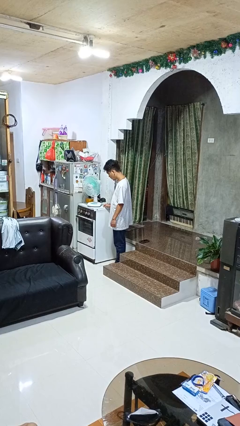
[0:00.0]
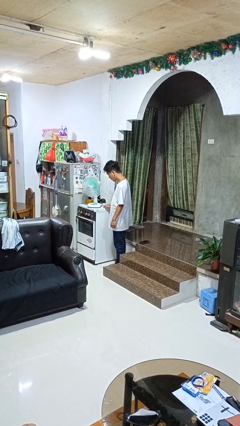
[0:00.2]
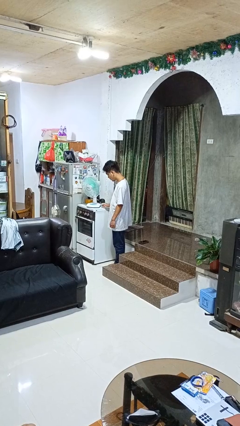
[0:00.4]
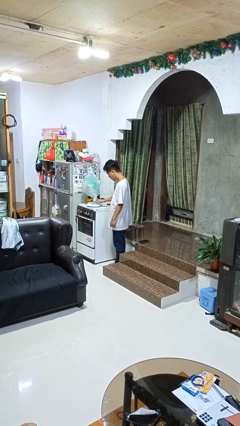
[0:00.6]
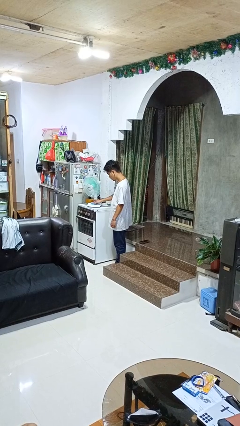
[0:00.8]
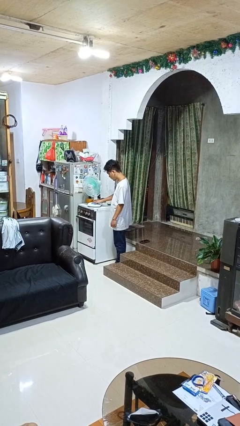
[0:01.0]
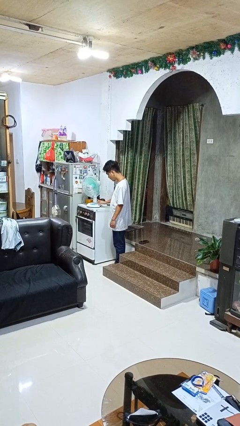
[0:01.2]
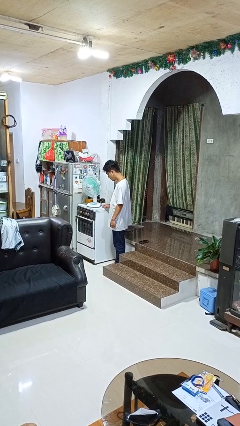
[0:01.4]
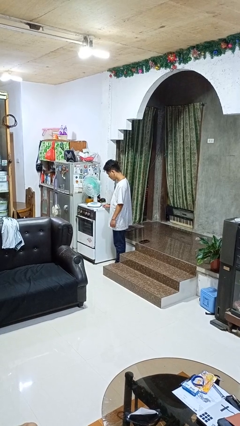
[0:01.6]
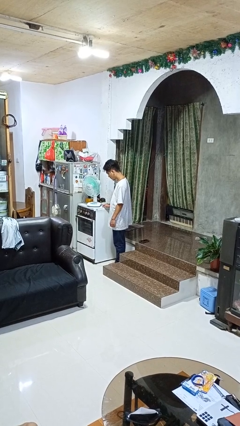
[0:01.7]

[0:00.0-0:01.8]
person turns off fan

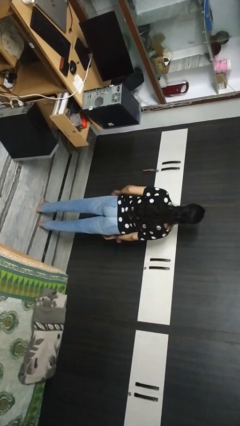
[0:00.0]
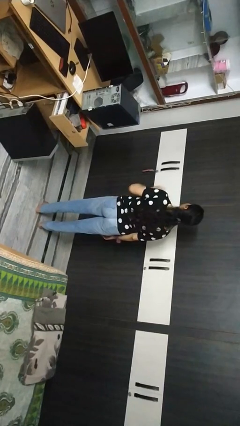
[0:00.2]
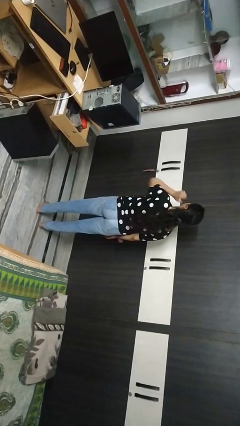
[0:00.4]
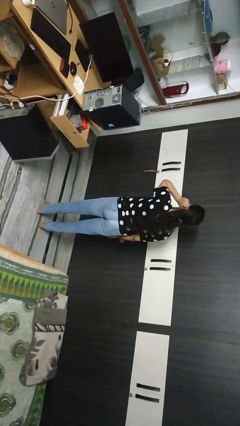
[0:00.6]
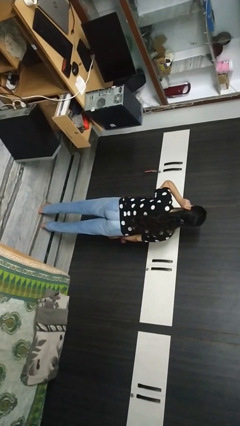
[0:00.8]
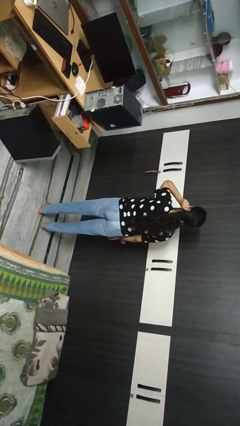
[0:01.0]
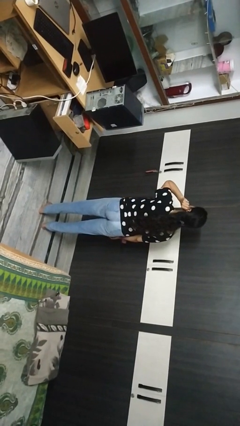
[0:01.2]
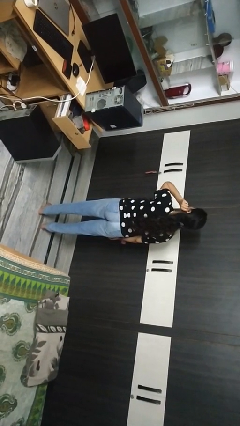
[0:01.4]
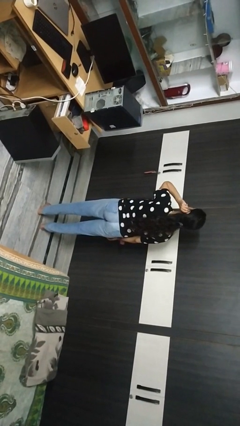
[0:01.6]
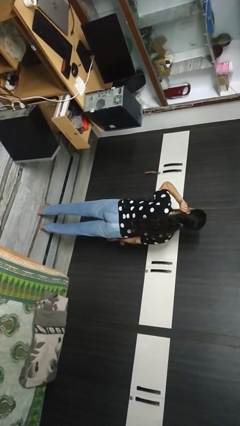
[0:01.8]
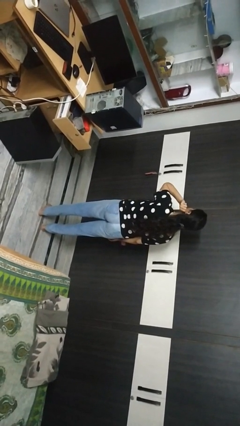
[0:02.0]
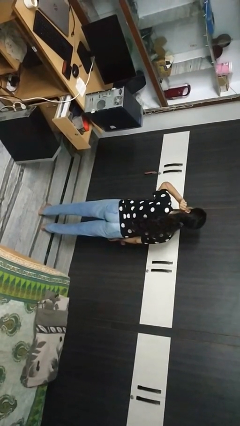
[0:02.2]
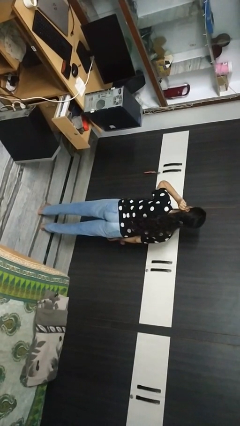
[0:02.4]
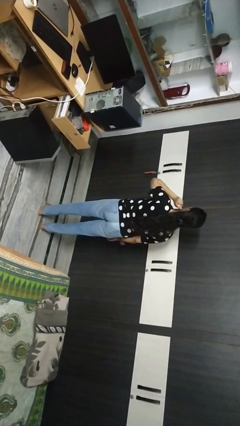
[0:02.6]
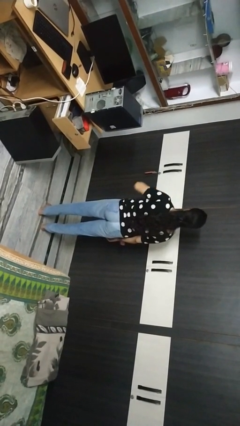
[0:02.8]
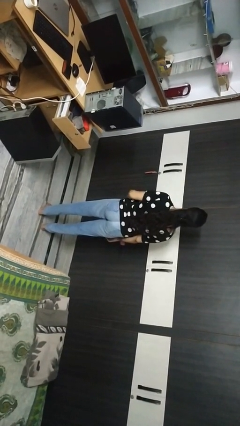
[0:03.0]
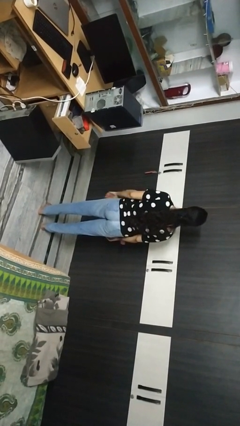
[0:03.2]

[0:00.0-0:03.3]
person touches earlobe

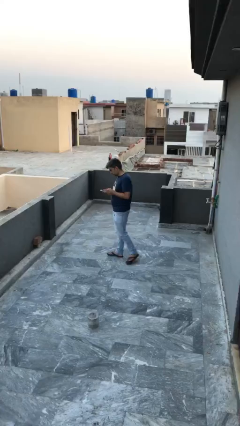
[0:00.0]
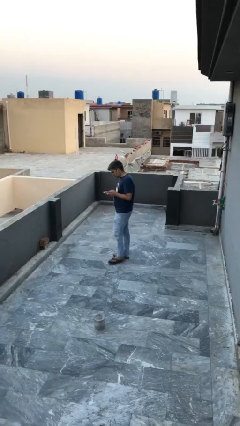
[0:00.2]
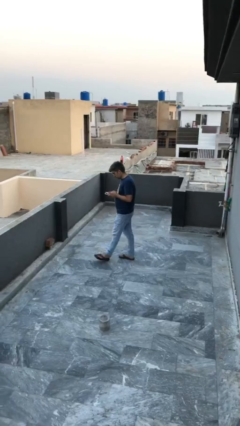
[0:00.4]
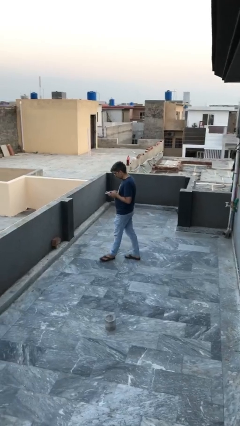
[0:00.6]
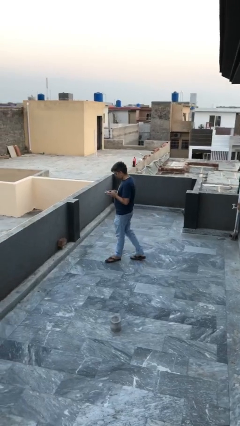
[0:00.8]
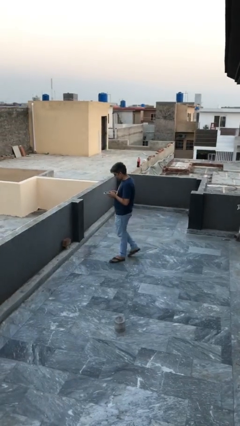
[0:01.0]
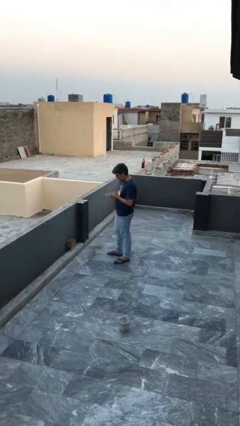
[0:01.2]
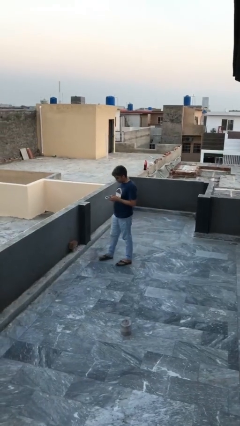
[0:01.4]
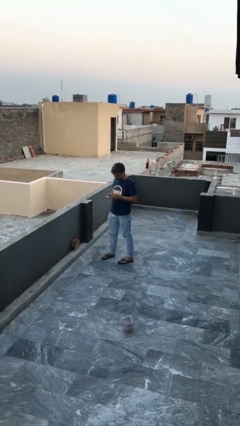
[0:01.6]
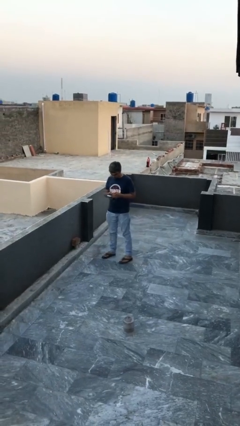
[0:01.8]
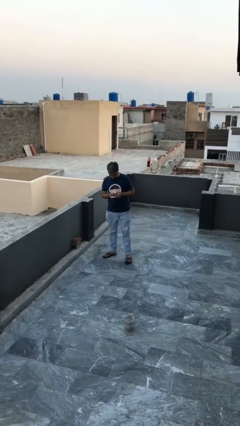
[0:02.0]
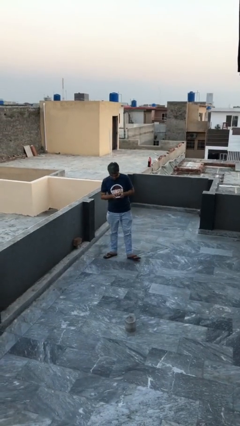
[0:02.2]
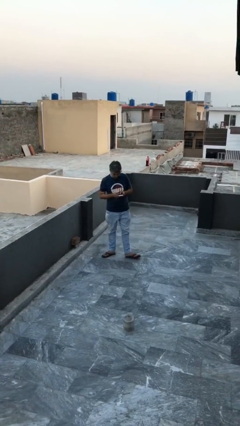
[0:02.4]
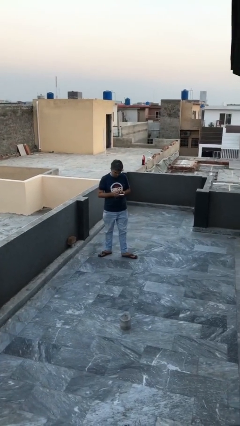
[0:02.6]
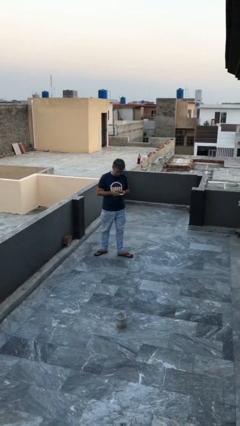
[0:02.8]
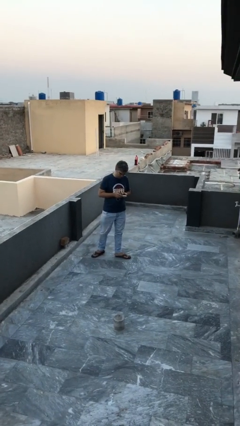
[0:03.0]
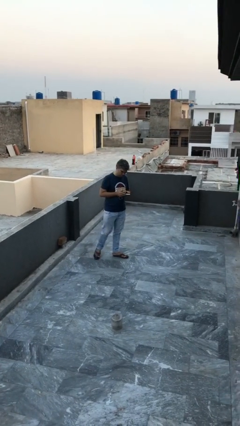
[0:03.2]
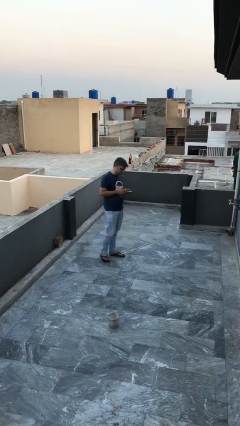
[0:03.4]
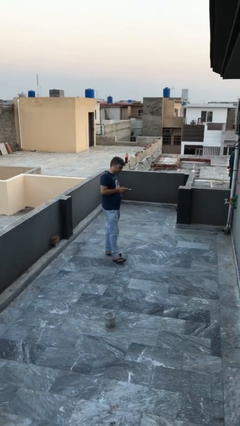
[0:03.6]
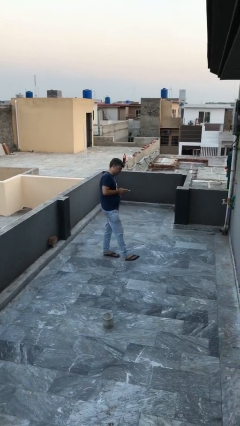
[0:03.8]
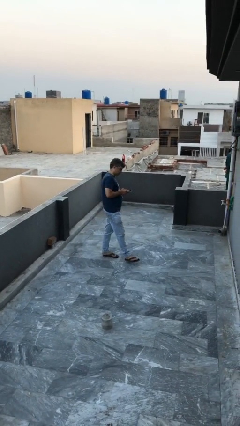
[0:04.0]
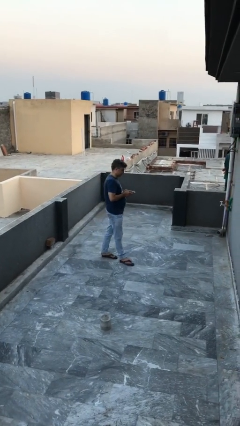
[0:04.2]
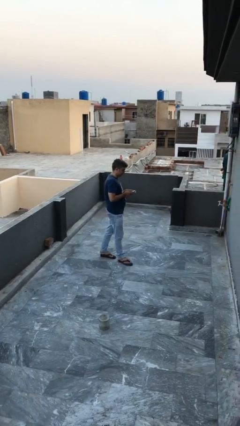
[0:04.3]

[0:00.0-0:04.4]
person texts on phone

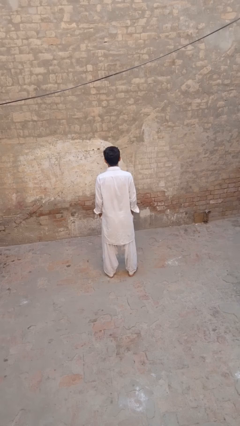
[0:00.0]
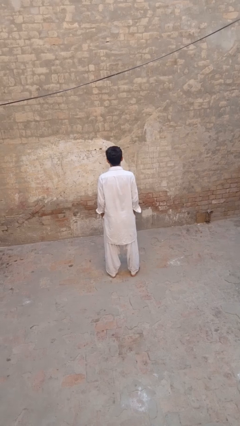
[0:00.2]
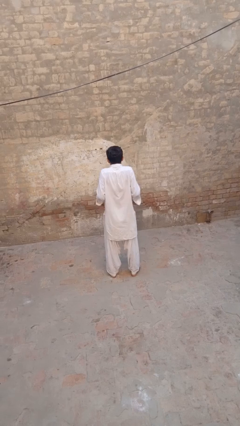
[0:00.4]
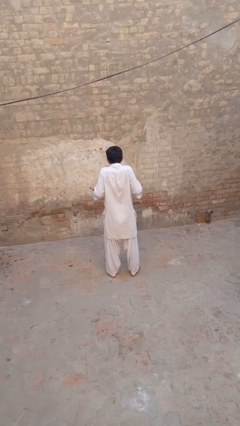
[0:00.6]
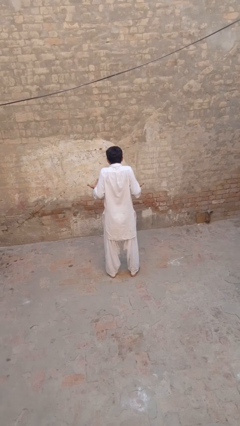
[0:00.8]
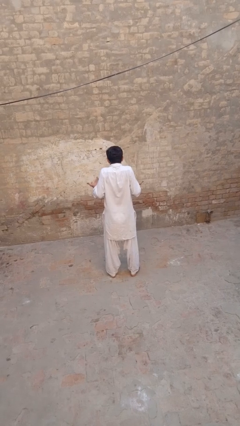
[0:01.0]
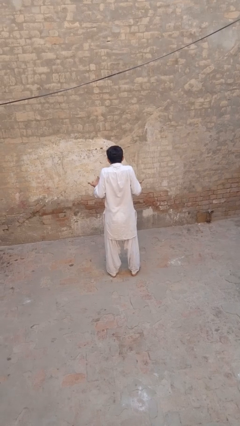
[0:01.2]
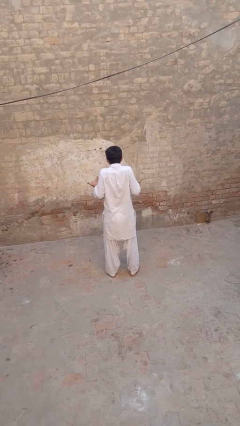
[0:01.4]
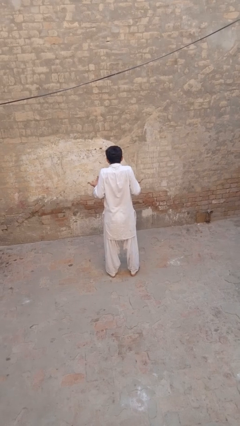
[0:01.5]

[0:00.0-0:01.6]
person shrugs

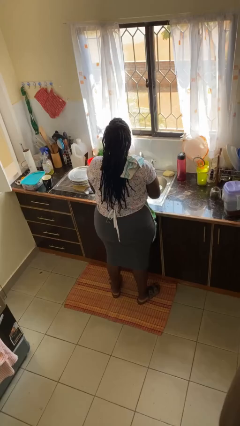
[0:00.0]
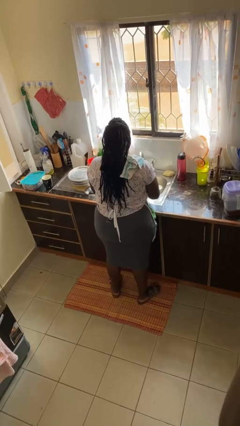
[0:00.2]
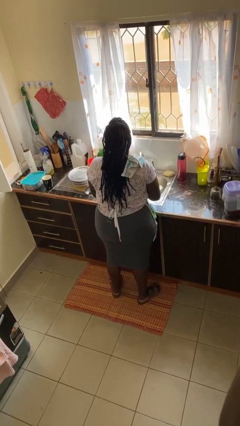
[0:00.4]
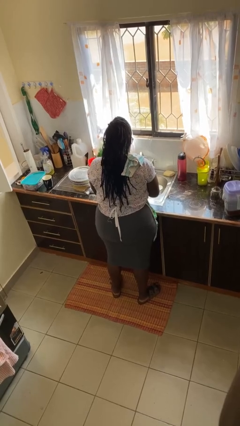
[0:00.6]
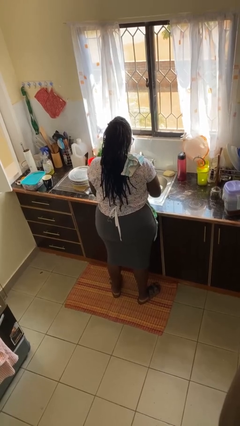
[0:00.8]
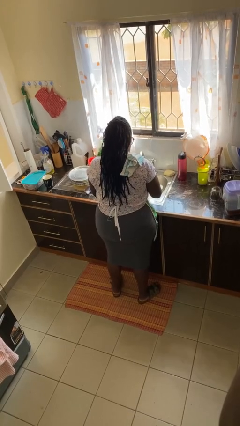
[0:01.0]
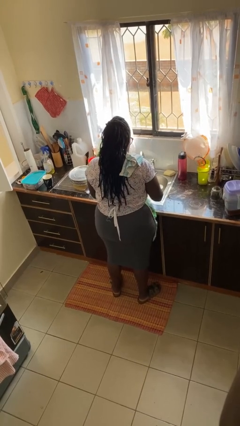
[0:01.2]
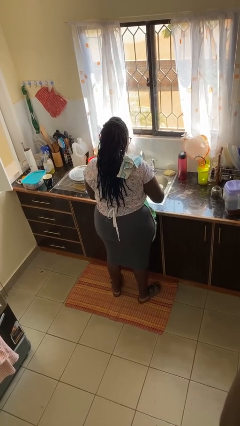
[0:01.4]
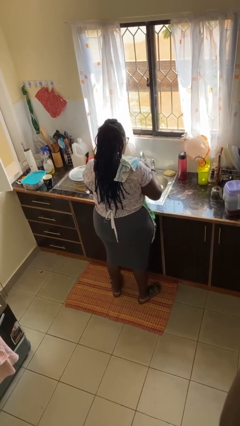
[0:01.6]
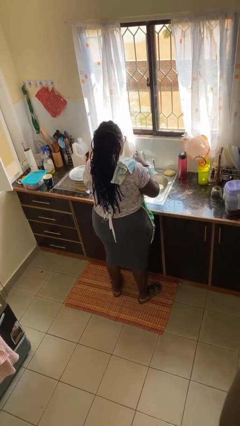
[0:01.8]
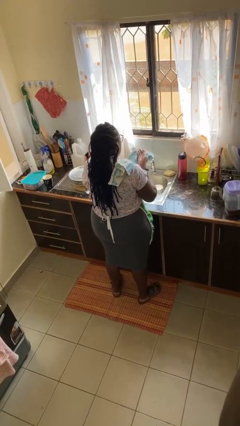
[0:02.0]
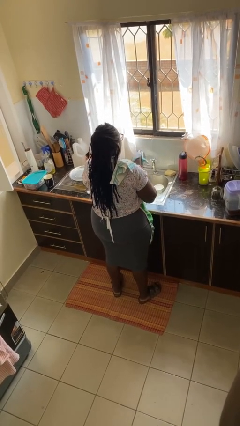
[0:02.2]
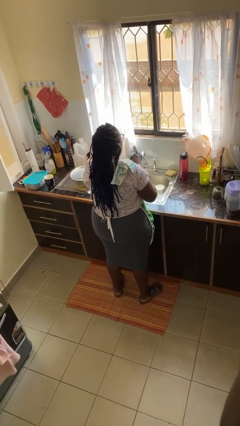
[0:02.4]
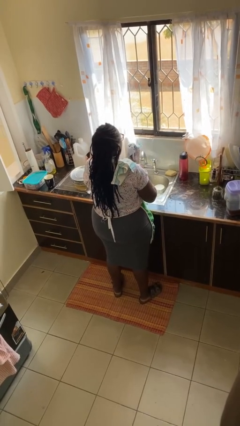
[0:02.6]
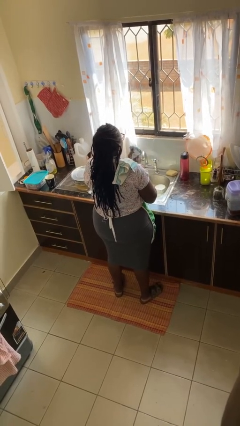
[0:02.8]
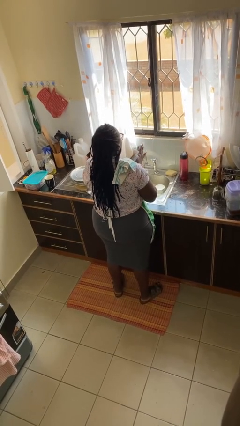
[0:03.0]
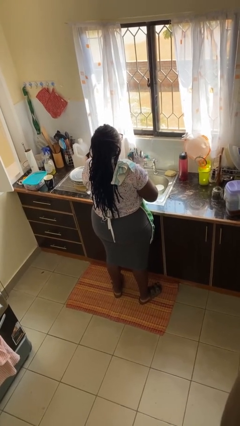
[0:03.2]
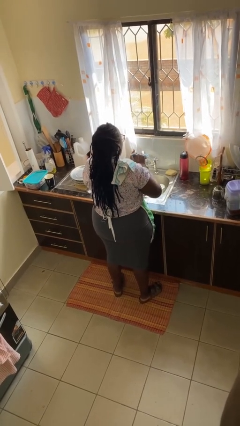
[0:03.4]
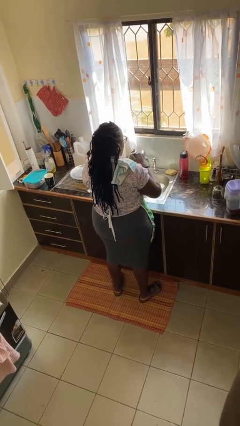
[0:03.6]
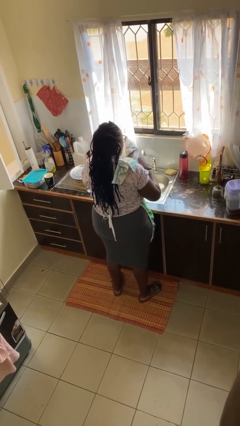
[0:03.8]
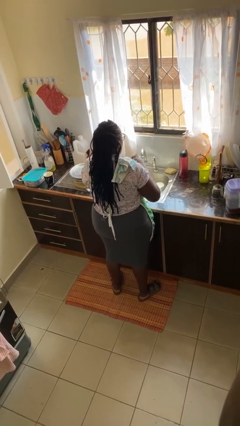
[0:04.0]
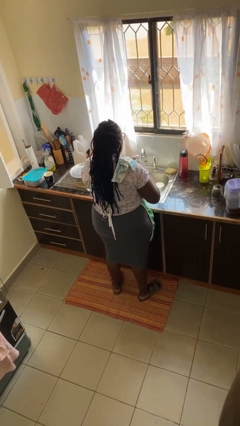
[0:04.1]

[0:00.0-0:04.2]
person dries hands with towel

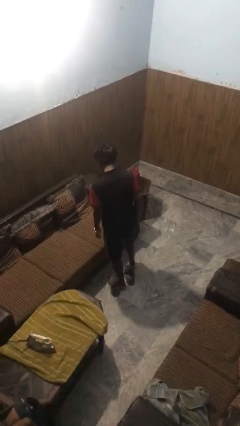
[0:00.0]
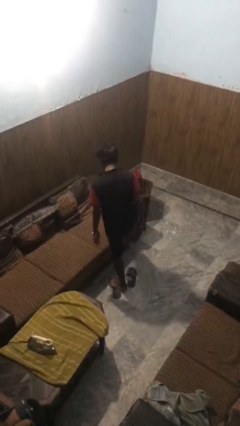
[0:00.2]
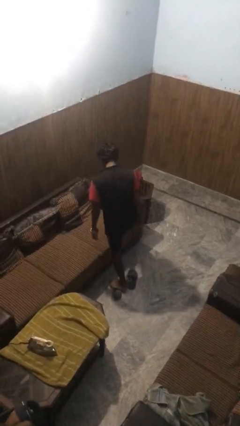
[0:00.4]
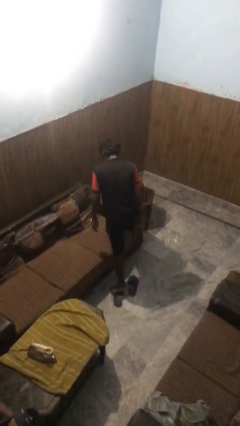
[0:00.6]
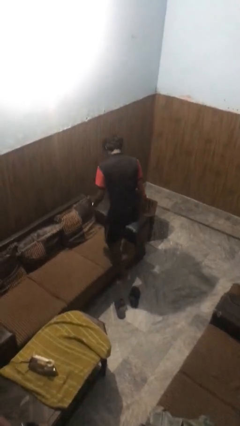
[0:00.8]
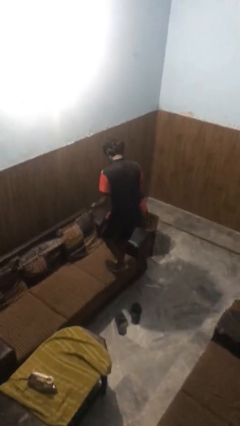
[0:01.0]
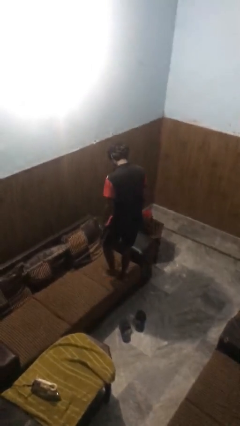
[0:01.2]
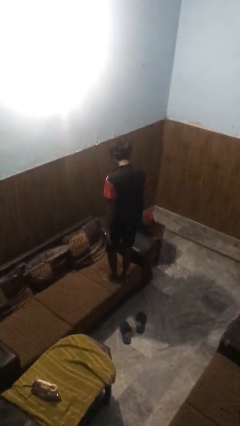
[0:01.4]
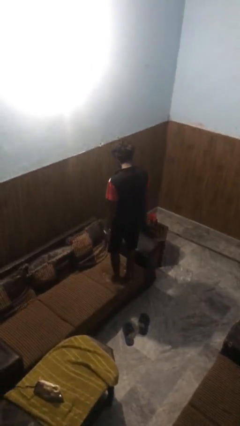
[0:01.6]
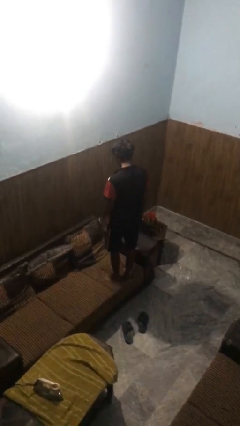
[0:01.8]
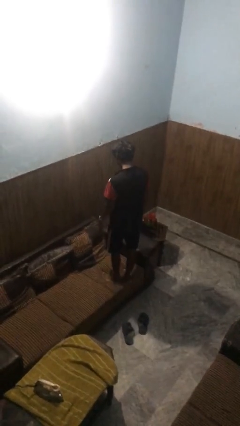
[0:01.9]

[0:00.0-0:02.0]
person climbs on couch

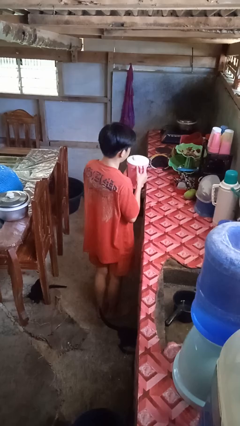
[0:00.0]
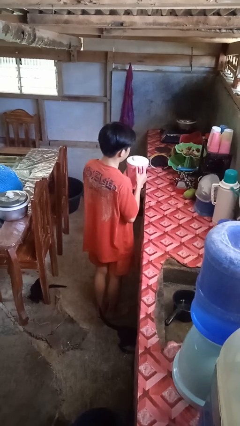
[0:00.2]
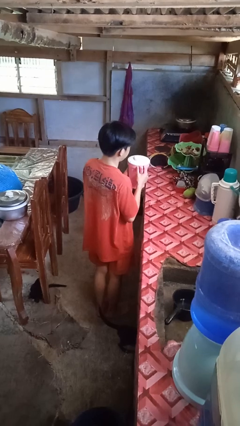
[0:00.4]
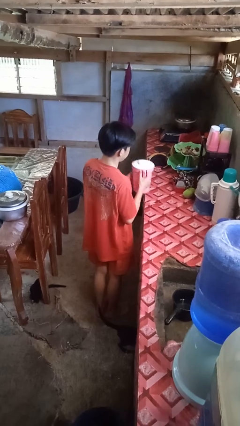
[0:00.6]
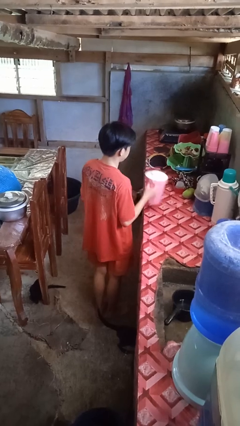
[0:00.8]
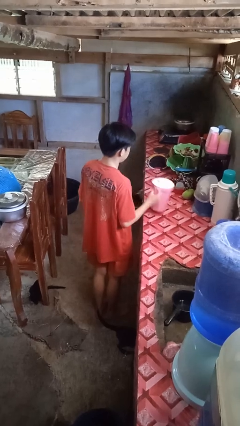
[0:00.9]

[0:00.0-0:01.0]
person puts down object on countertop
